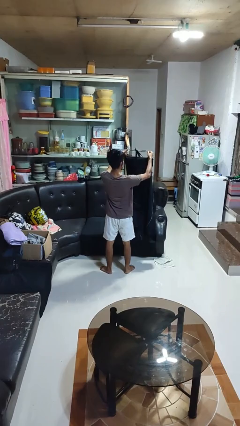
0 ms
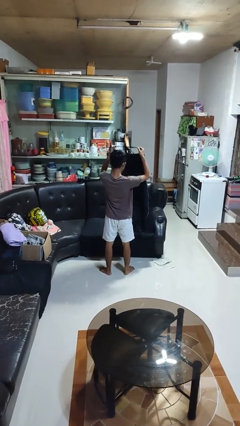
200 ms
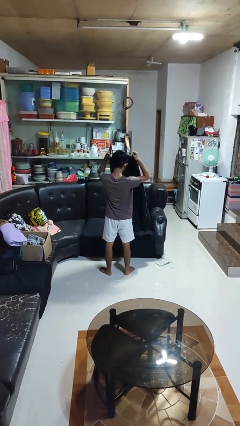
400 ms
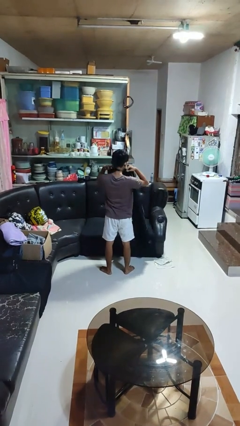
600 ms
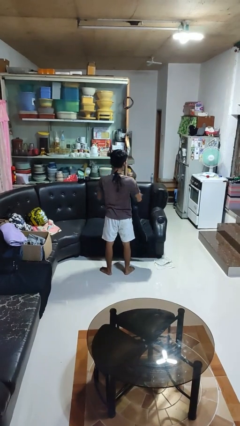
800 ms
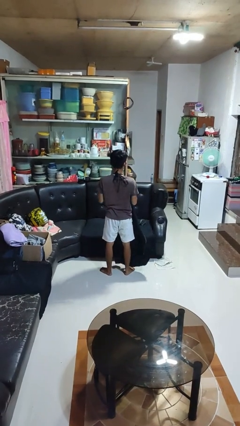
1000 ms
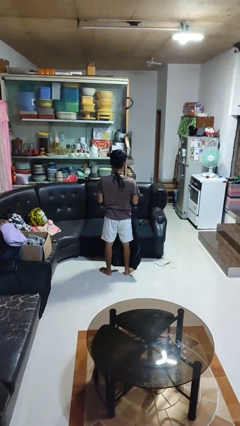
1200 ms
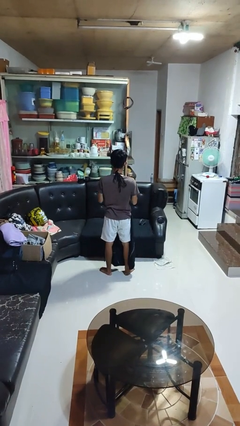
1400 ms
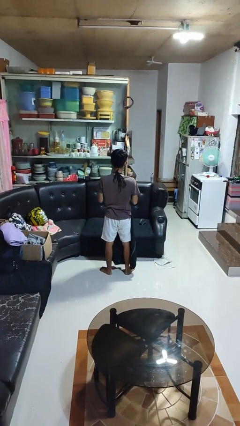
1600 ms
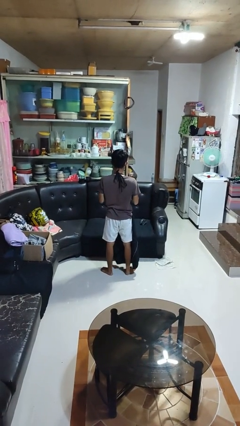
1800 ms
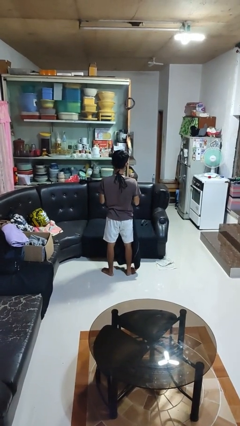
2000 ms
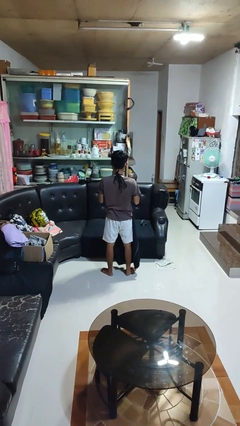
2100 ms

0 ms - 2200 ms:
person puts on apron

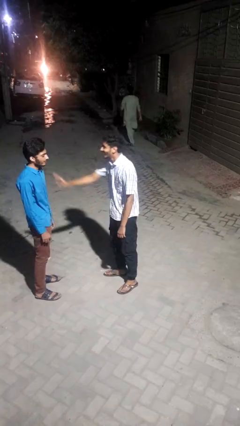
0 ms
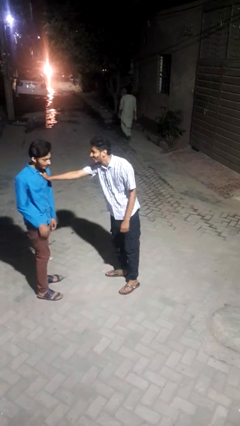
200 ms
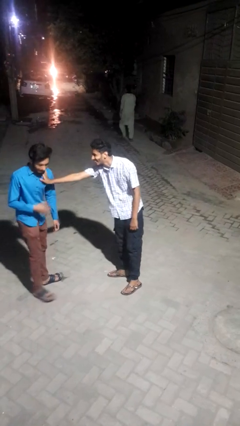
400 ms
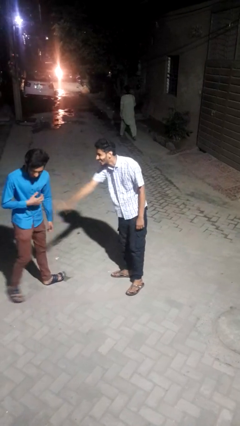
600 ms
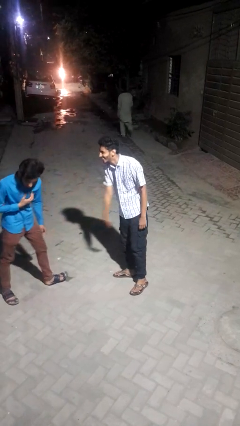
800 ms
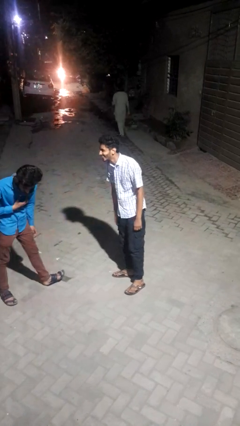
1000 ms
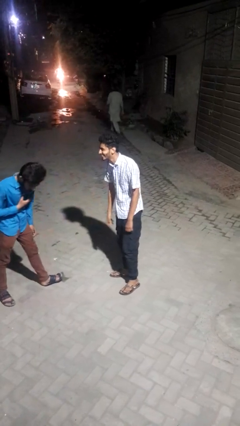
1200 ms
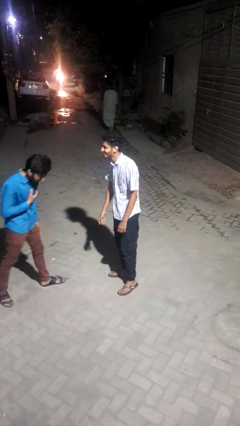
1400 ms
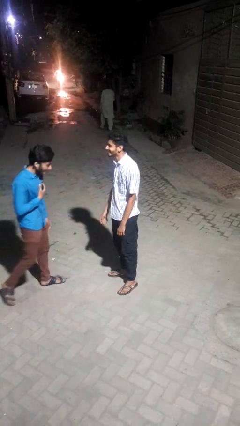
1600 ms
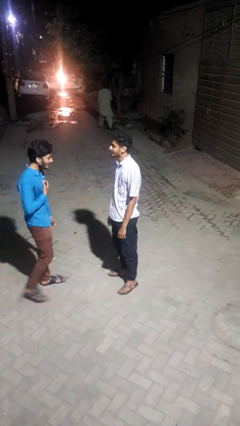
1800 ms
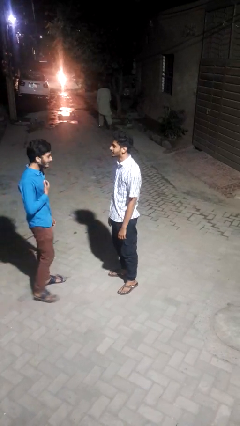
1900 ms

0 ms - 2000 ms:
person shoves person
